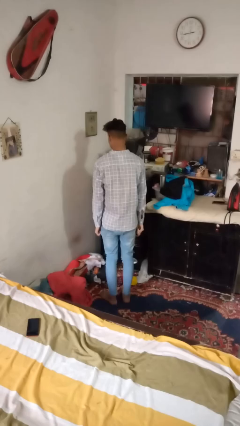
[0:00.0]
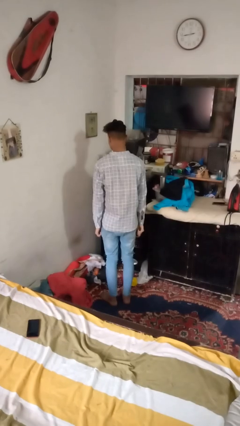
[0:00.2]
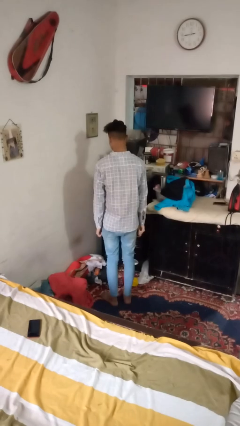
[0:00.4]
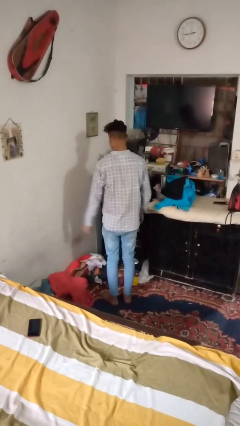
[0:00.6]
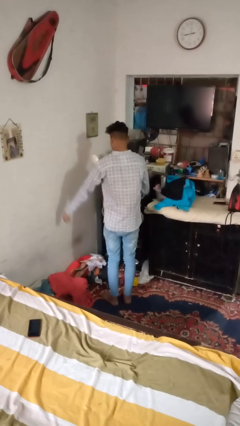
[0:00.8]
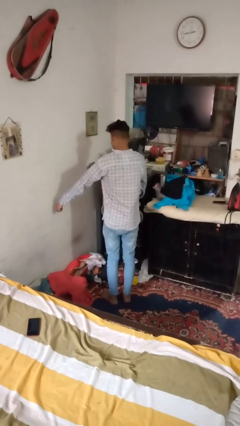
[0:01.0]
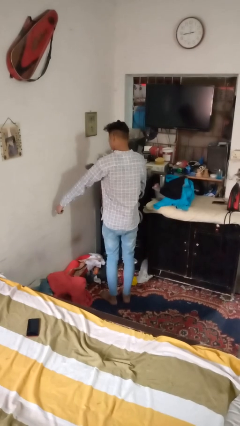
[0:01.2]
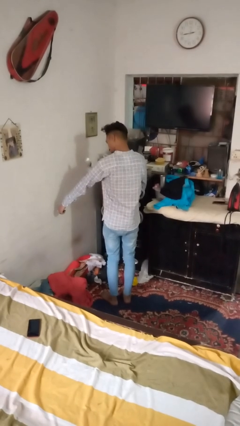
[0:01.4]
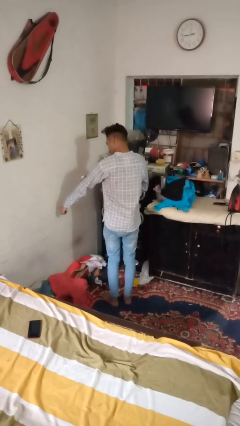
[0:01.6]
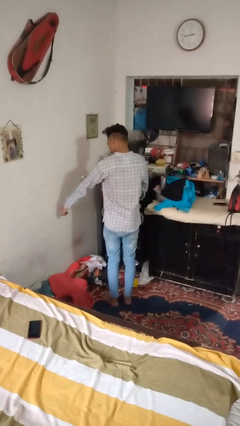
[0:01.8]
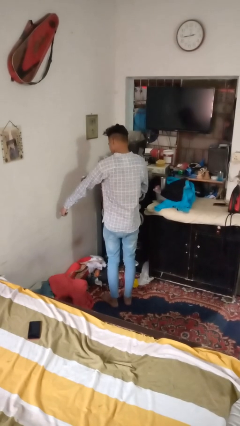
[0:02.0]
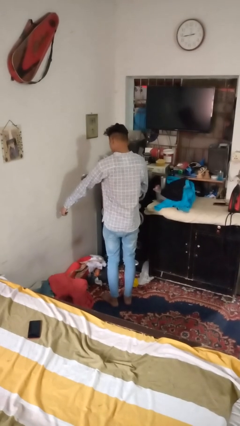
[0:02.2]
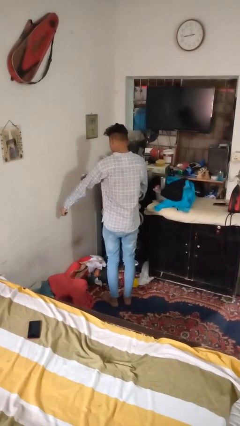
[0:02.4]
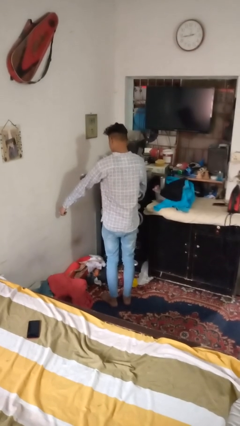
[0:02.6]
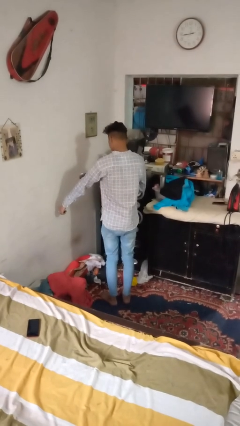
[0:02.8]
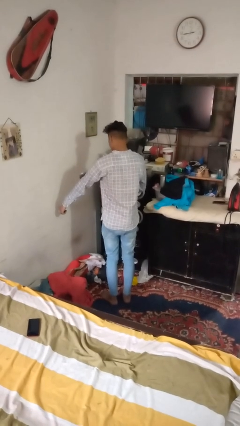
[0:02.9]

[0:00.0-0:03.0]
person swats bug

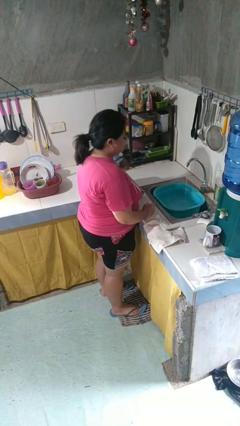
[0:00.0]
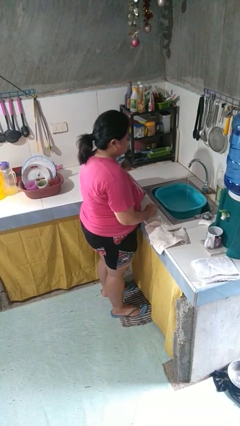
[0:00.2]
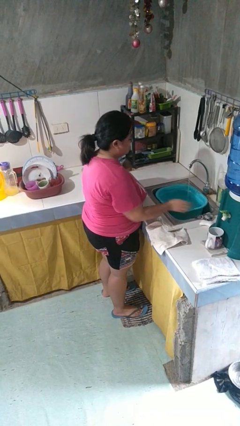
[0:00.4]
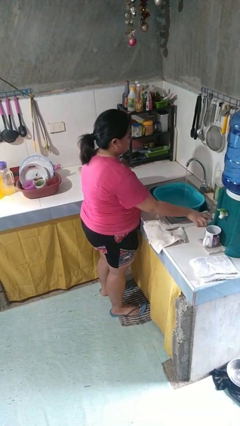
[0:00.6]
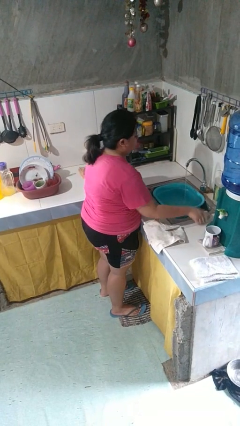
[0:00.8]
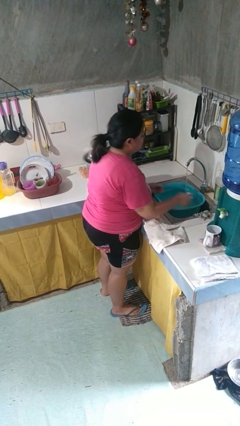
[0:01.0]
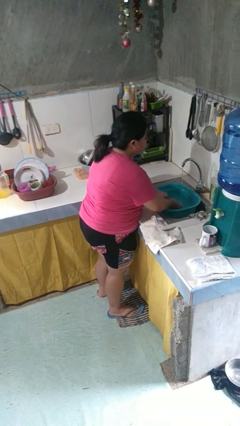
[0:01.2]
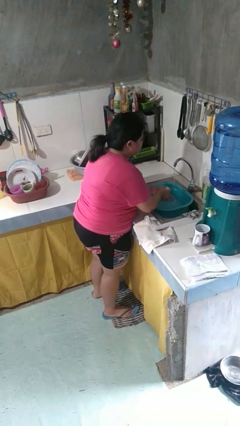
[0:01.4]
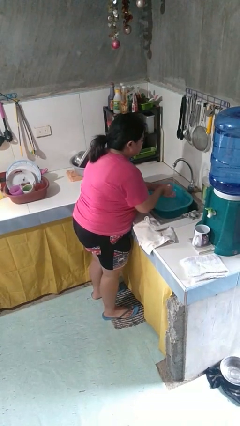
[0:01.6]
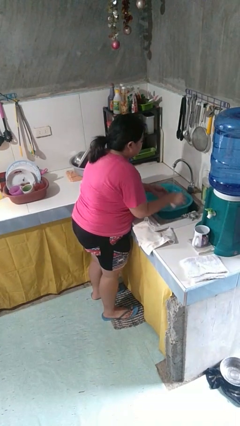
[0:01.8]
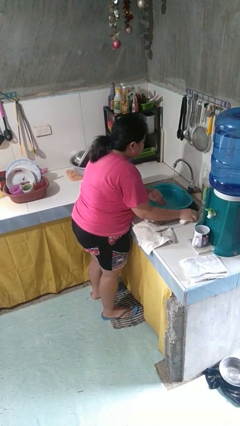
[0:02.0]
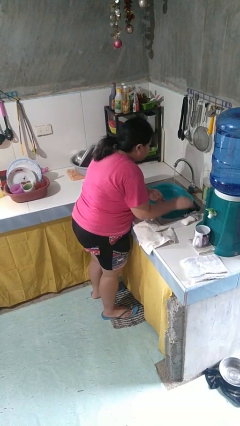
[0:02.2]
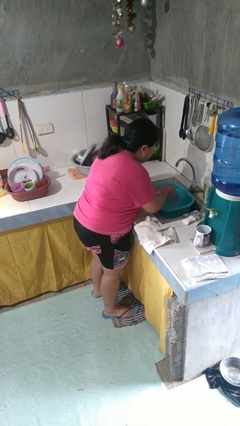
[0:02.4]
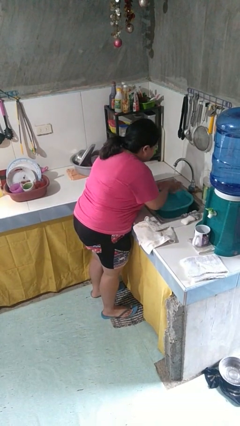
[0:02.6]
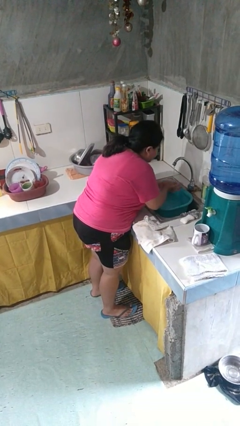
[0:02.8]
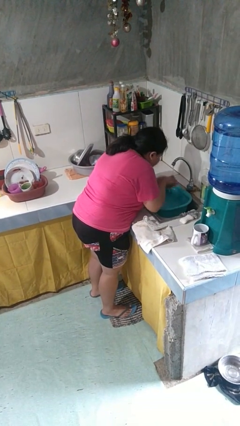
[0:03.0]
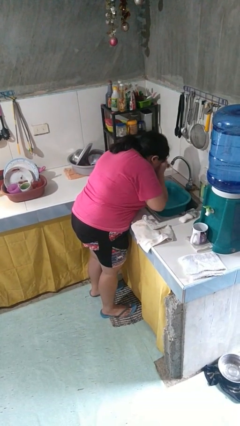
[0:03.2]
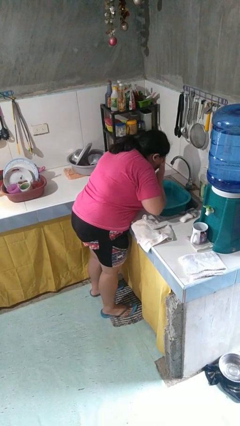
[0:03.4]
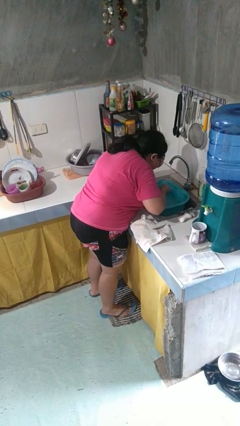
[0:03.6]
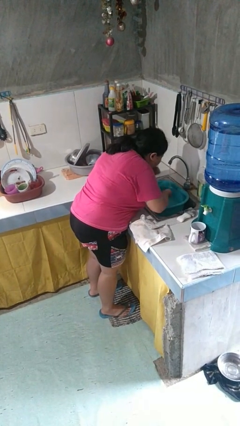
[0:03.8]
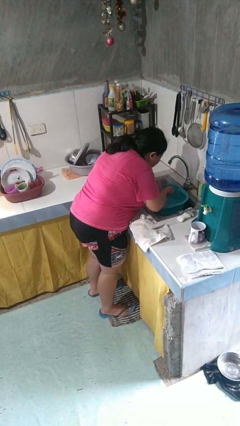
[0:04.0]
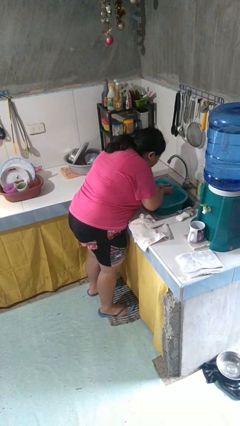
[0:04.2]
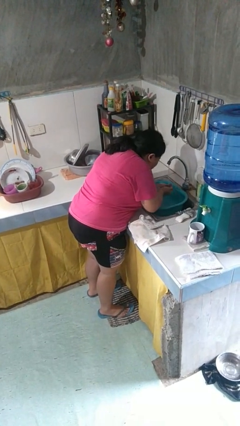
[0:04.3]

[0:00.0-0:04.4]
person washes face

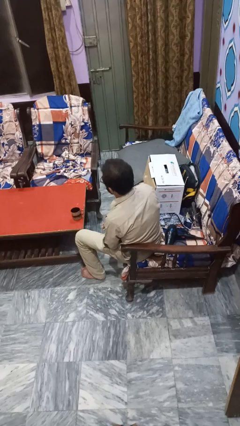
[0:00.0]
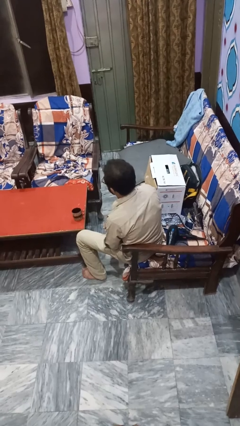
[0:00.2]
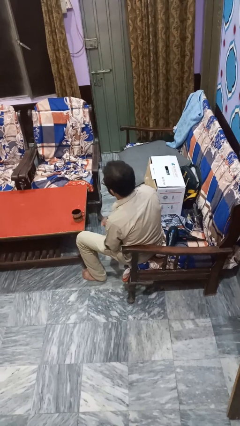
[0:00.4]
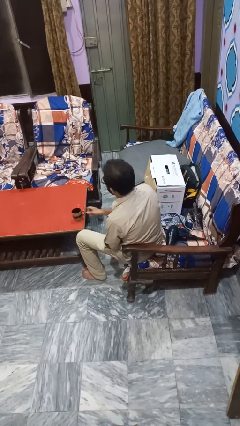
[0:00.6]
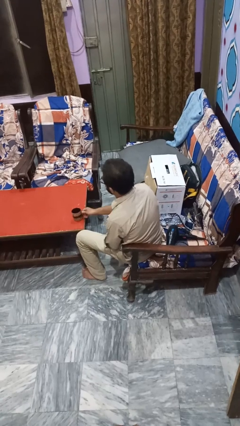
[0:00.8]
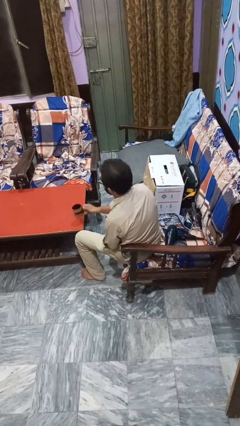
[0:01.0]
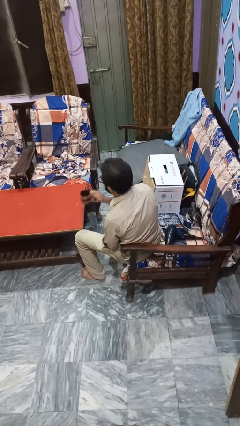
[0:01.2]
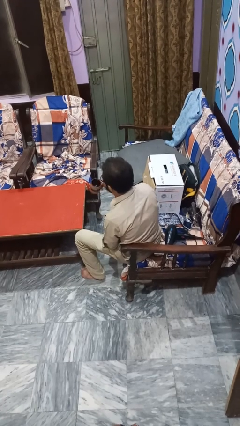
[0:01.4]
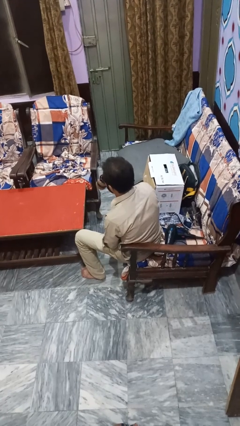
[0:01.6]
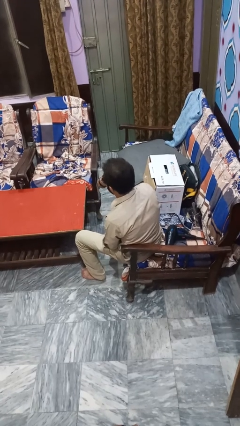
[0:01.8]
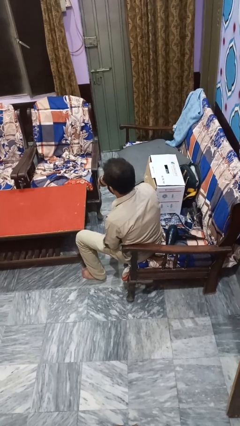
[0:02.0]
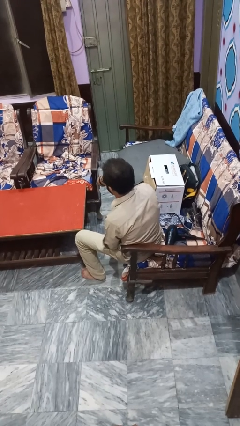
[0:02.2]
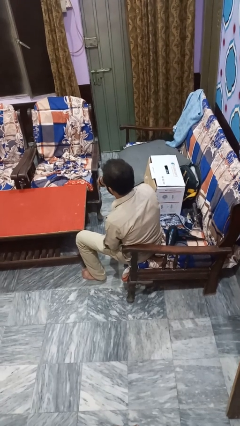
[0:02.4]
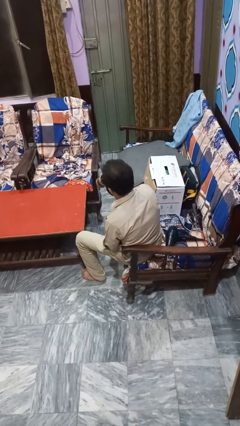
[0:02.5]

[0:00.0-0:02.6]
person pours coffee into mug

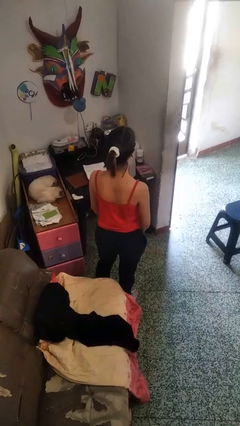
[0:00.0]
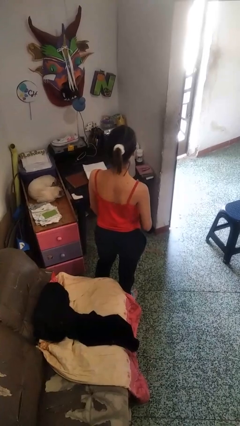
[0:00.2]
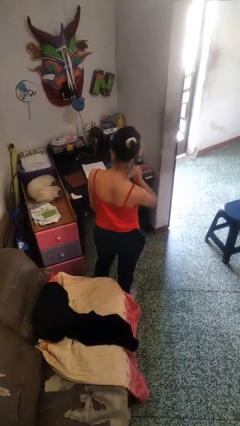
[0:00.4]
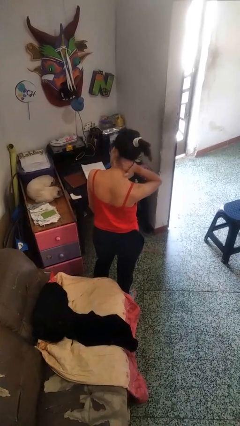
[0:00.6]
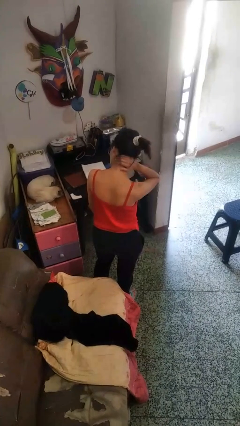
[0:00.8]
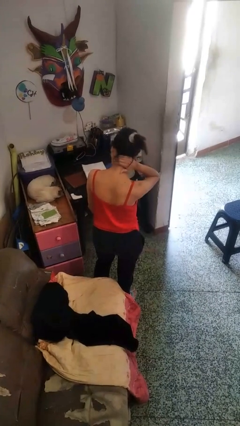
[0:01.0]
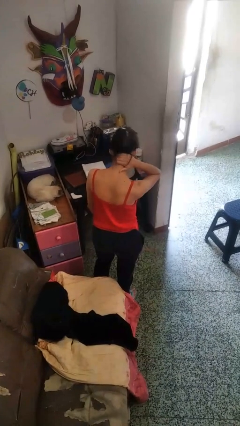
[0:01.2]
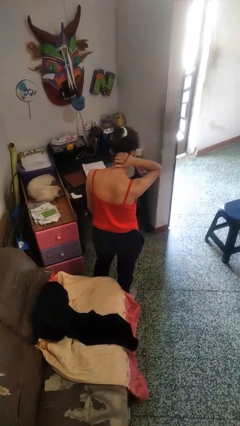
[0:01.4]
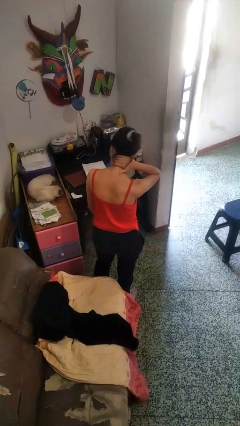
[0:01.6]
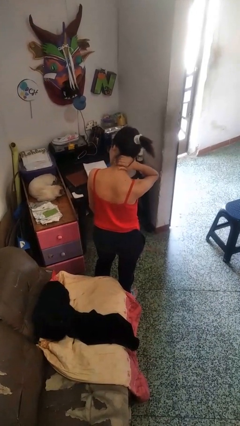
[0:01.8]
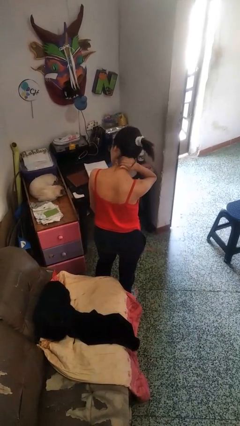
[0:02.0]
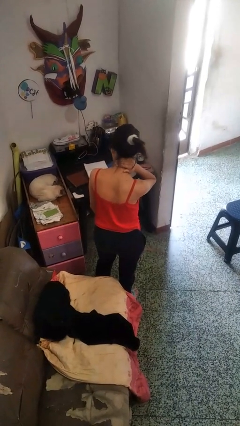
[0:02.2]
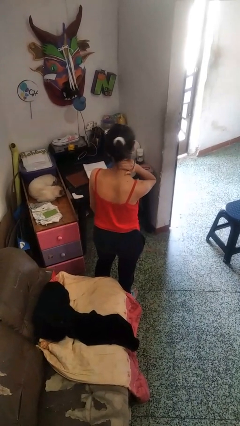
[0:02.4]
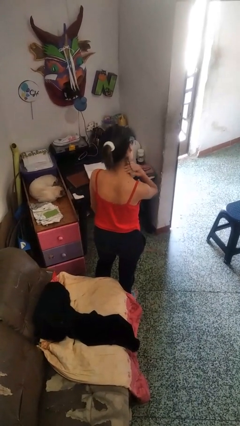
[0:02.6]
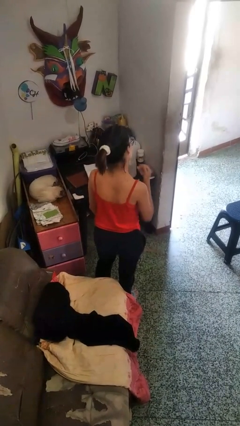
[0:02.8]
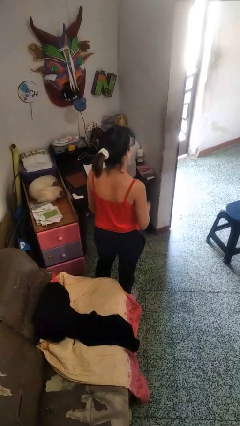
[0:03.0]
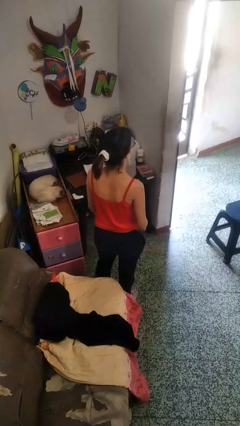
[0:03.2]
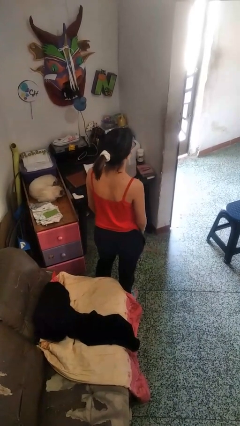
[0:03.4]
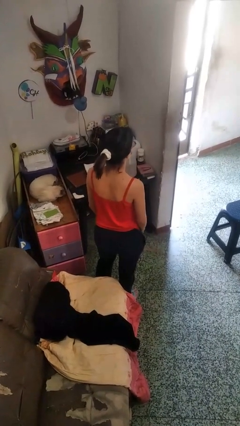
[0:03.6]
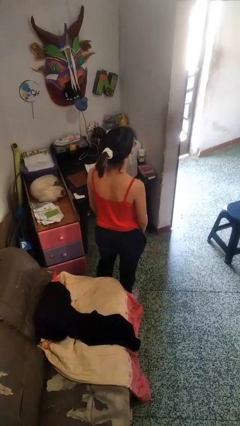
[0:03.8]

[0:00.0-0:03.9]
person rubs neck

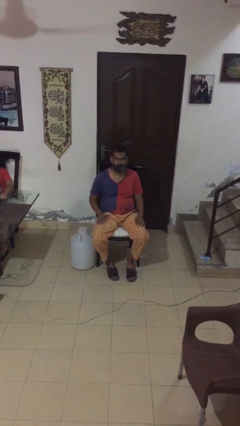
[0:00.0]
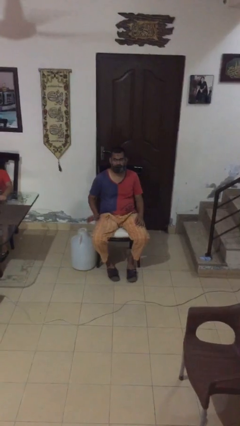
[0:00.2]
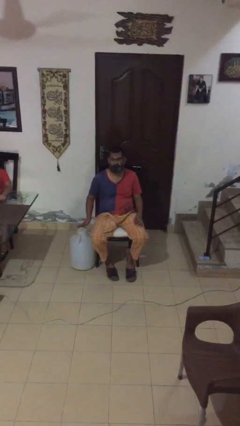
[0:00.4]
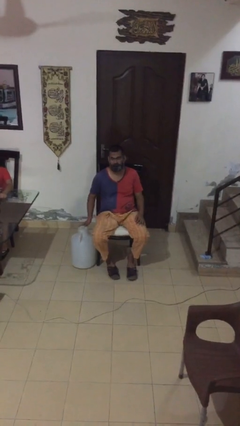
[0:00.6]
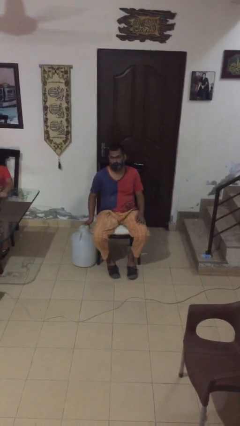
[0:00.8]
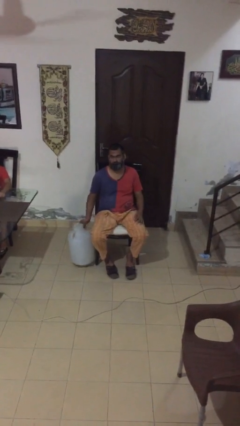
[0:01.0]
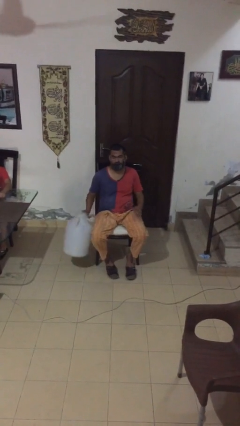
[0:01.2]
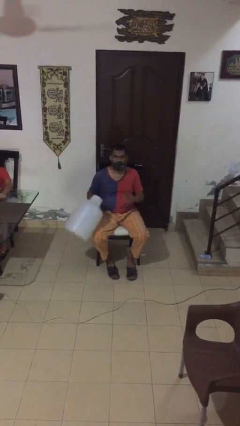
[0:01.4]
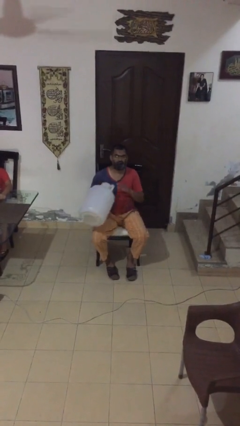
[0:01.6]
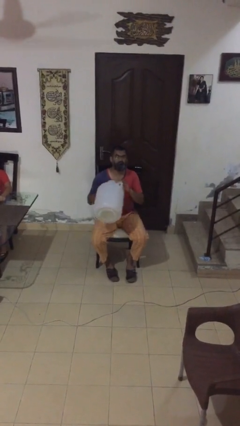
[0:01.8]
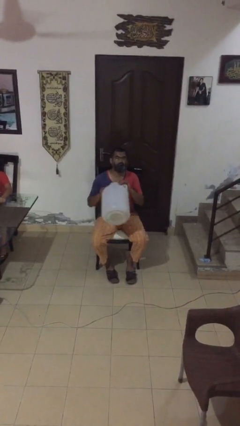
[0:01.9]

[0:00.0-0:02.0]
person picks up object from floor

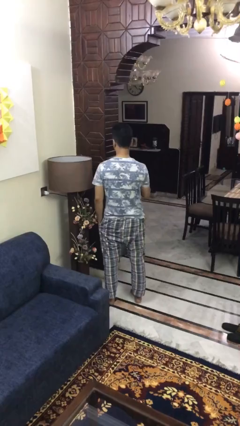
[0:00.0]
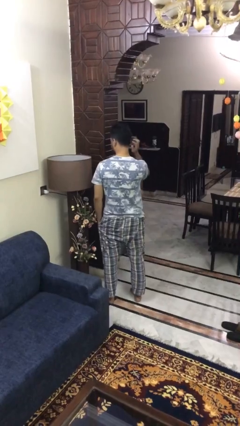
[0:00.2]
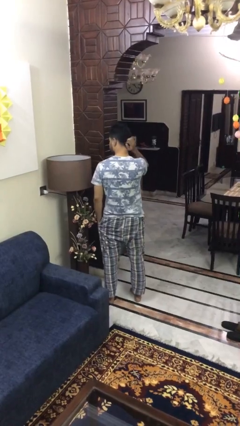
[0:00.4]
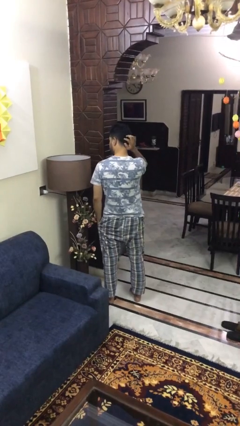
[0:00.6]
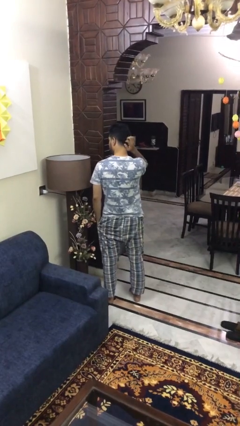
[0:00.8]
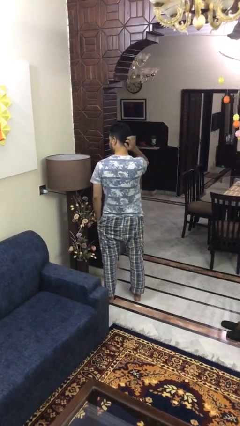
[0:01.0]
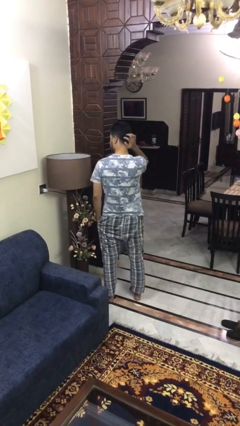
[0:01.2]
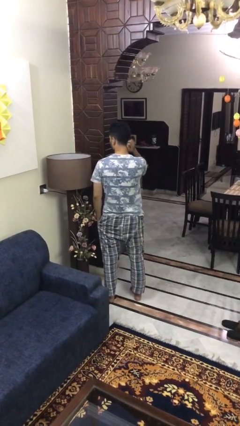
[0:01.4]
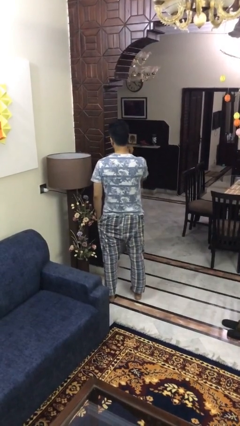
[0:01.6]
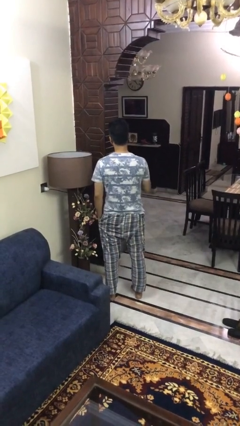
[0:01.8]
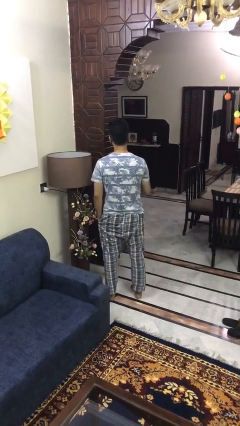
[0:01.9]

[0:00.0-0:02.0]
person scratches face
